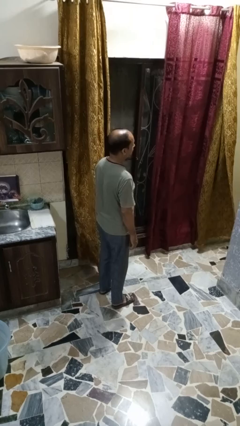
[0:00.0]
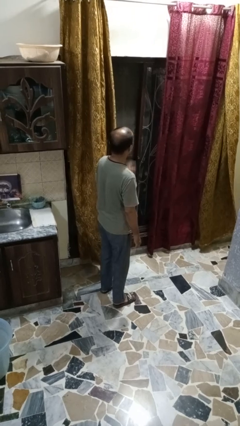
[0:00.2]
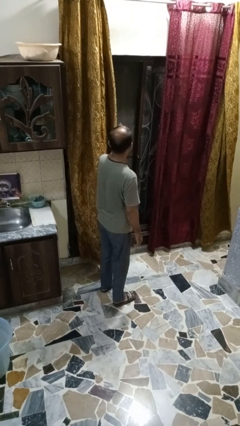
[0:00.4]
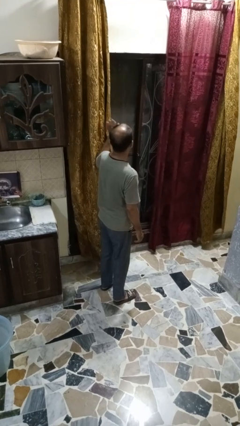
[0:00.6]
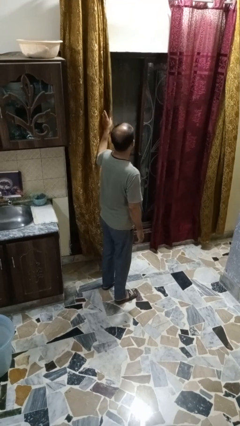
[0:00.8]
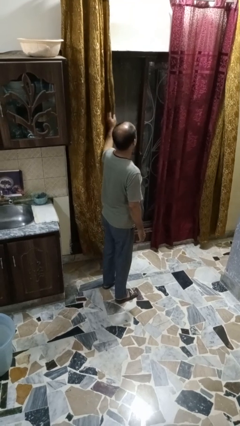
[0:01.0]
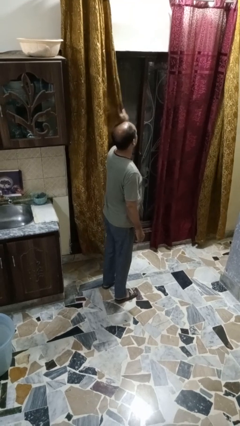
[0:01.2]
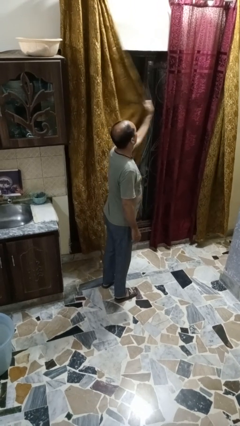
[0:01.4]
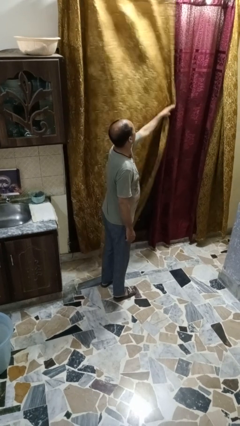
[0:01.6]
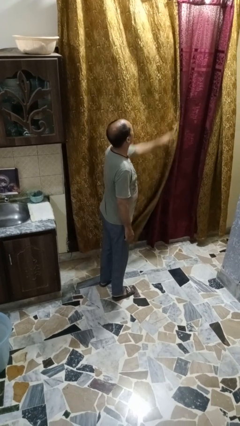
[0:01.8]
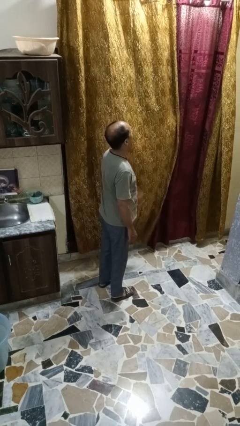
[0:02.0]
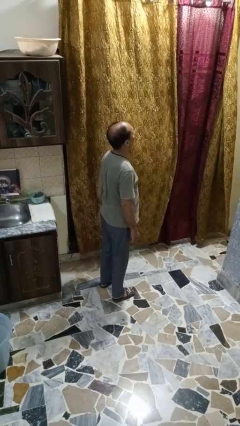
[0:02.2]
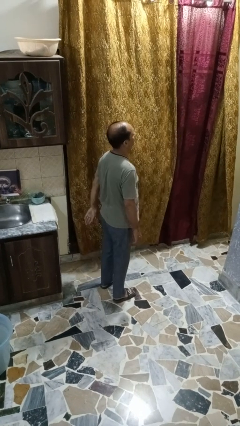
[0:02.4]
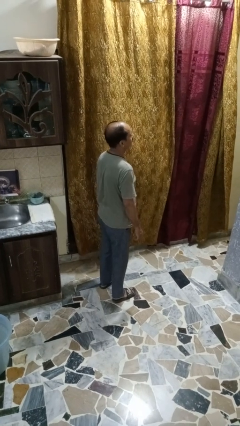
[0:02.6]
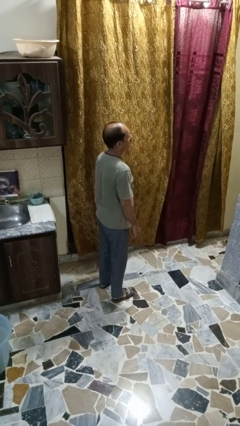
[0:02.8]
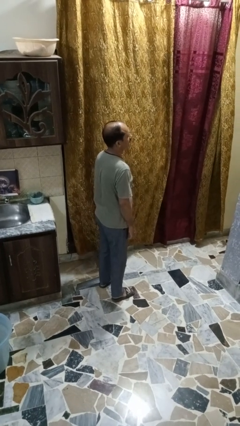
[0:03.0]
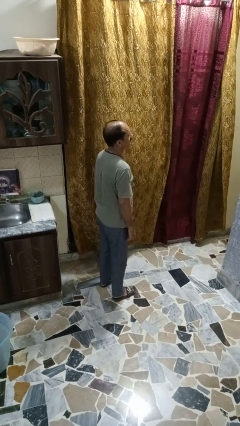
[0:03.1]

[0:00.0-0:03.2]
person closes curtains

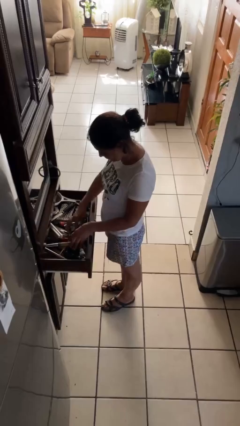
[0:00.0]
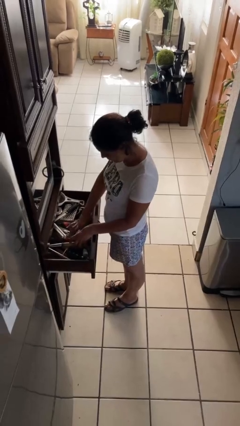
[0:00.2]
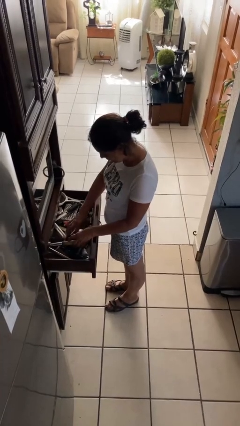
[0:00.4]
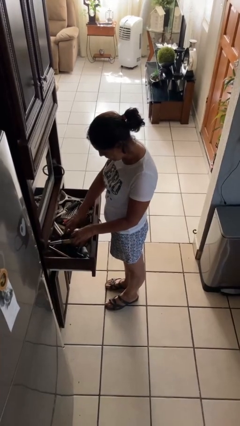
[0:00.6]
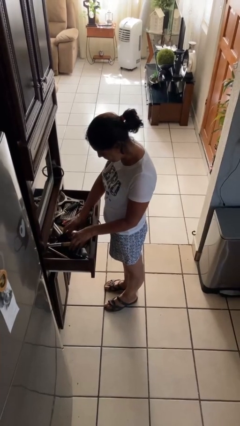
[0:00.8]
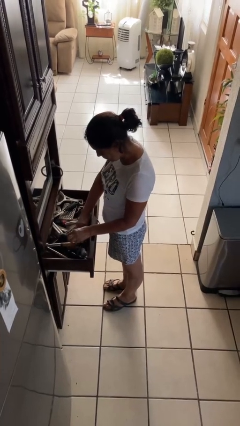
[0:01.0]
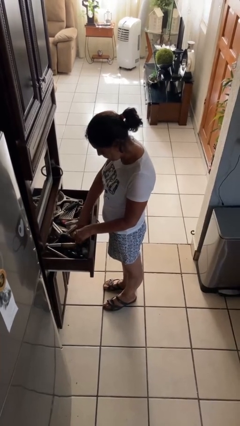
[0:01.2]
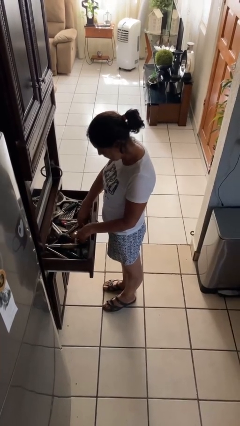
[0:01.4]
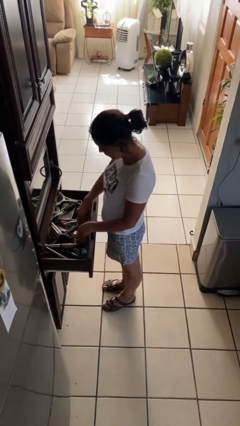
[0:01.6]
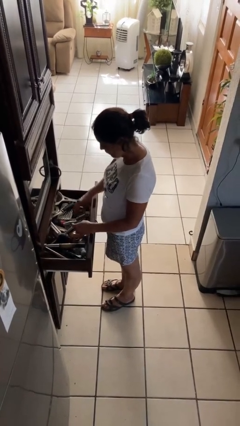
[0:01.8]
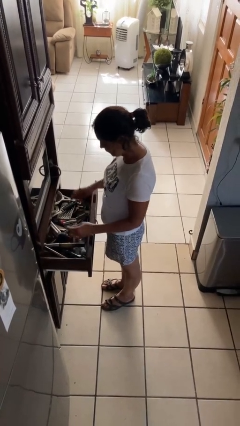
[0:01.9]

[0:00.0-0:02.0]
person searches in kitchen drawer

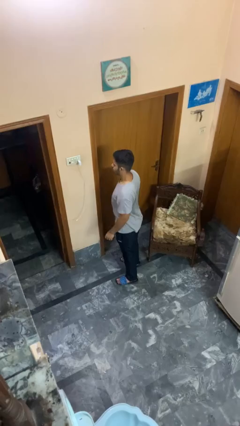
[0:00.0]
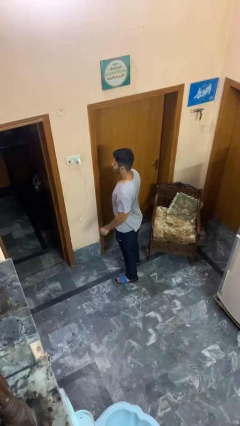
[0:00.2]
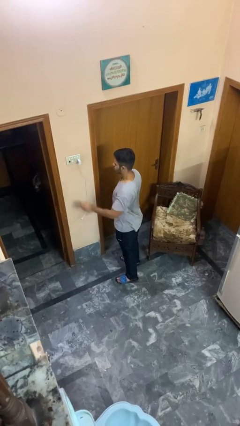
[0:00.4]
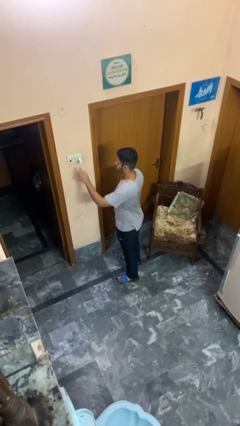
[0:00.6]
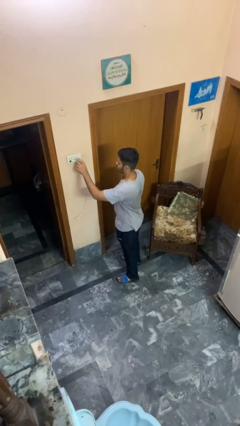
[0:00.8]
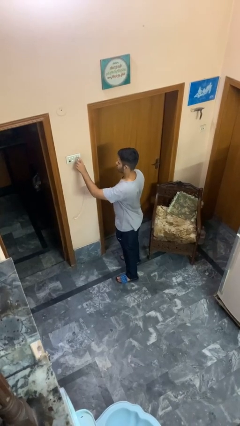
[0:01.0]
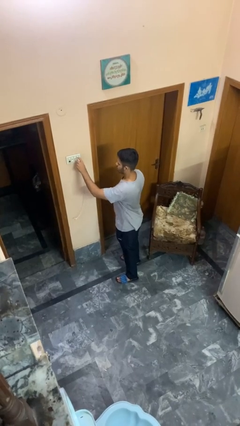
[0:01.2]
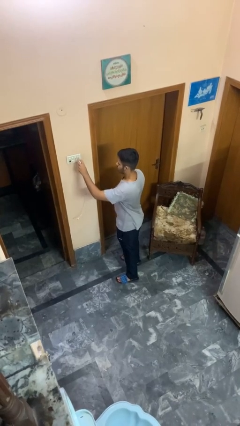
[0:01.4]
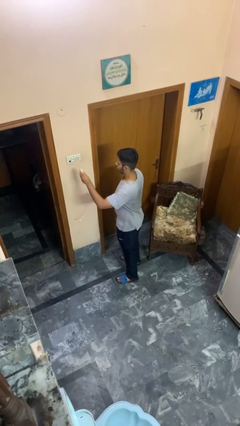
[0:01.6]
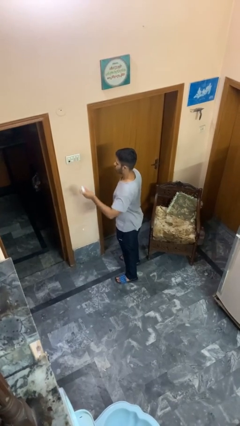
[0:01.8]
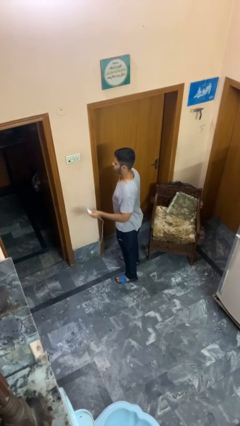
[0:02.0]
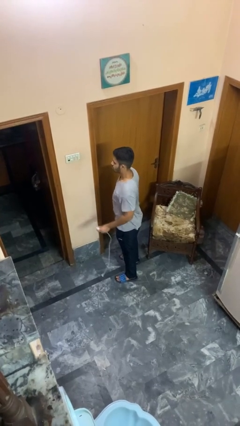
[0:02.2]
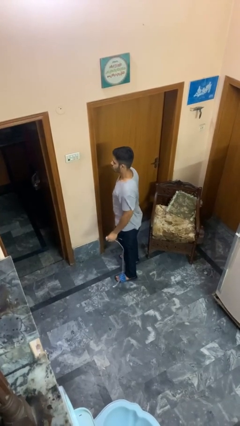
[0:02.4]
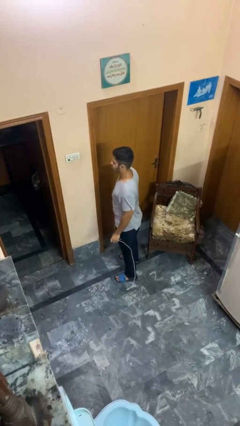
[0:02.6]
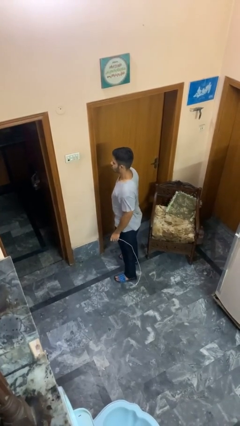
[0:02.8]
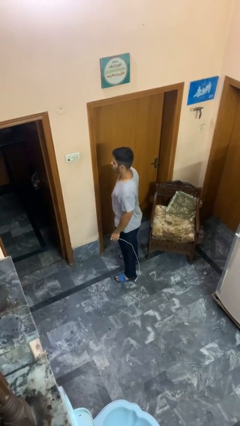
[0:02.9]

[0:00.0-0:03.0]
person unplugs from electrical socket

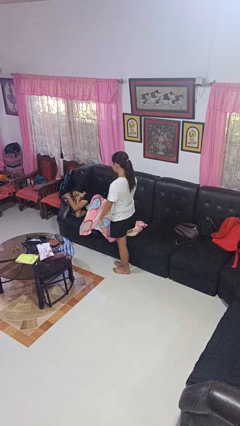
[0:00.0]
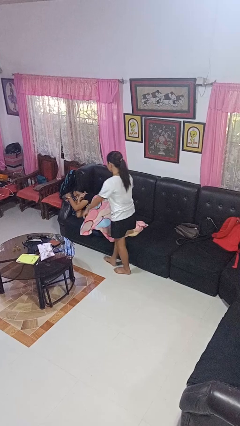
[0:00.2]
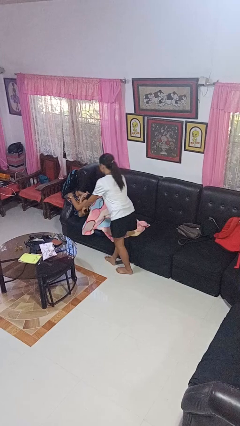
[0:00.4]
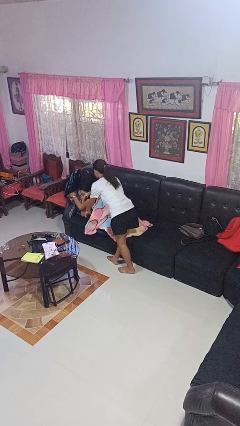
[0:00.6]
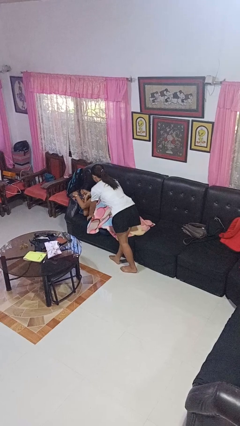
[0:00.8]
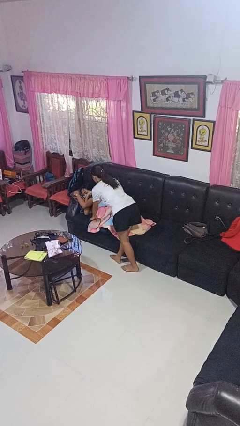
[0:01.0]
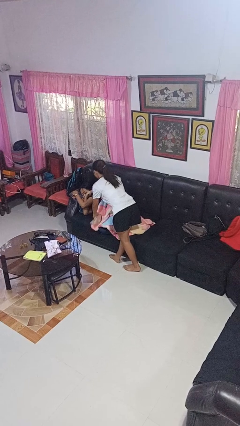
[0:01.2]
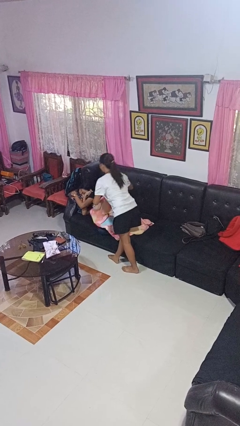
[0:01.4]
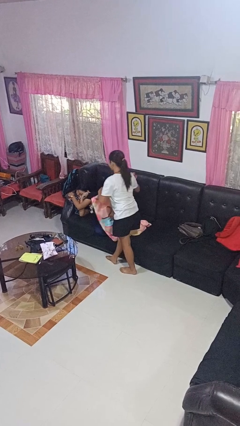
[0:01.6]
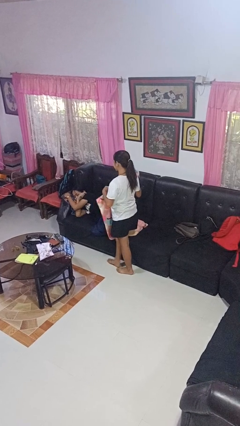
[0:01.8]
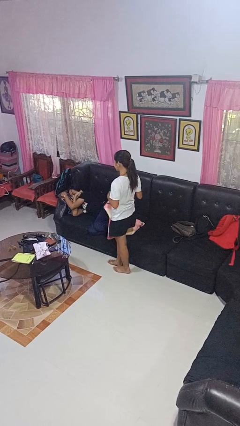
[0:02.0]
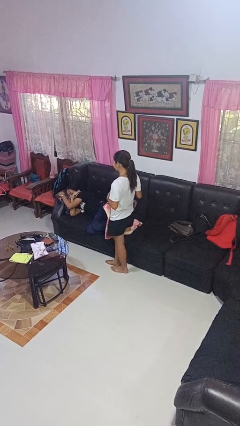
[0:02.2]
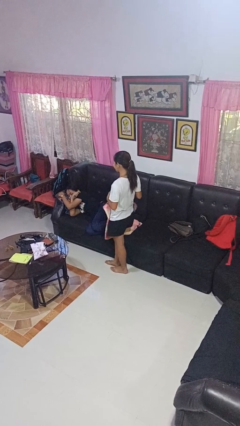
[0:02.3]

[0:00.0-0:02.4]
person uncovers friend with blanket

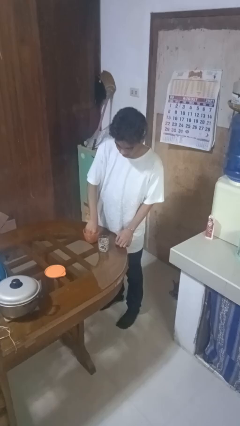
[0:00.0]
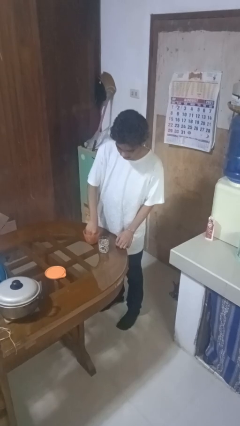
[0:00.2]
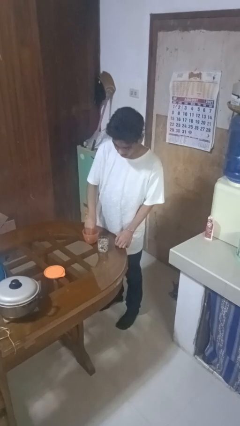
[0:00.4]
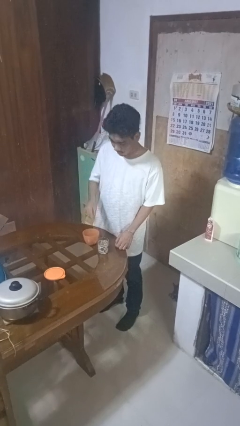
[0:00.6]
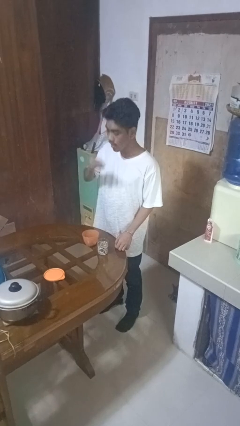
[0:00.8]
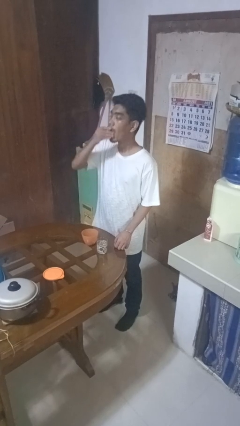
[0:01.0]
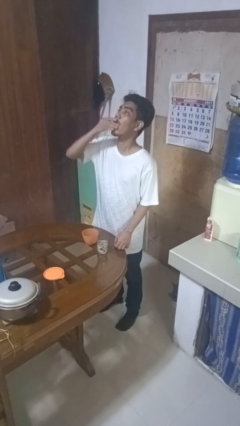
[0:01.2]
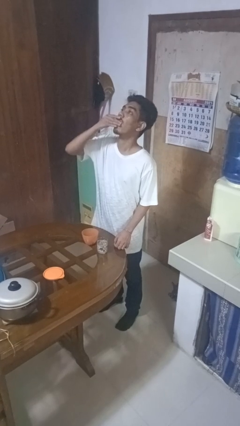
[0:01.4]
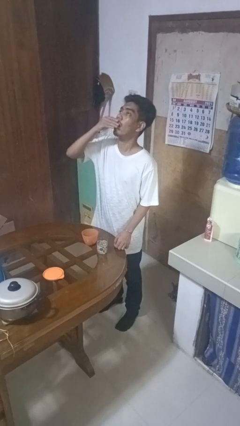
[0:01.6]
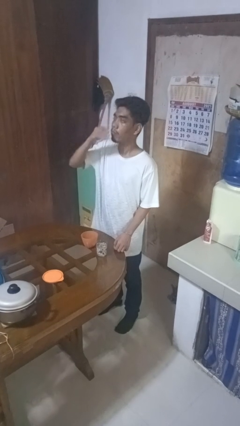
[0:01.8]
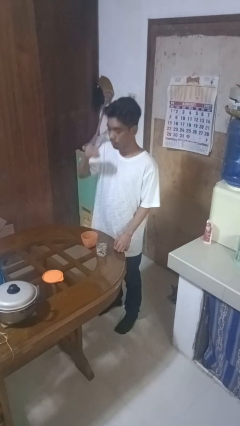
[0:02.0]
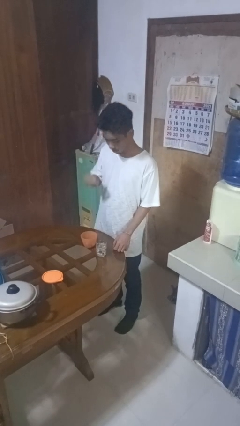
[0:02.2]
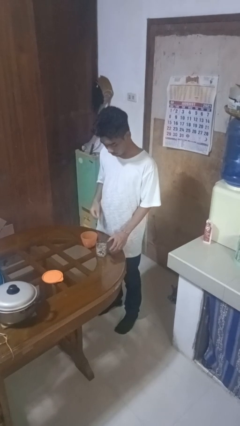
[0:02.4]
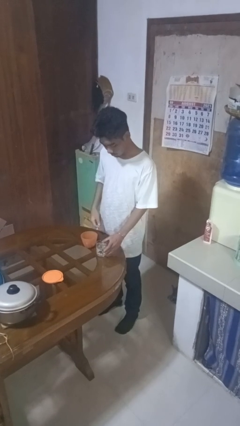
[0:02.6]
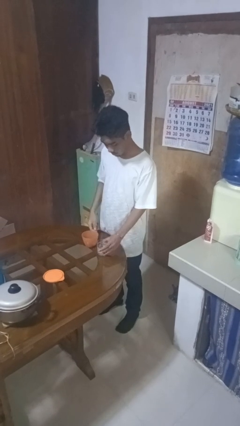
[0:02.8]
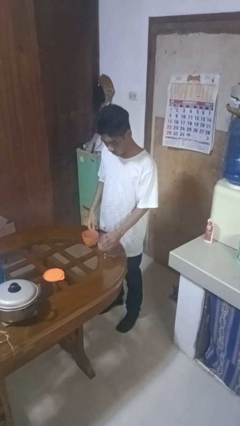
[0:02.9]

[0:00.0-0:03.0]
person takes medicine pills

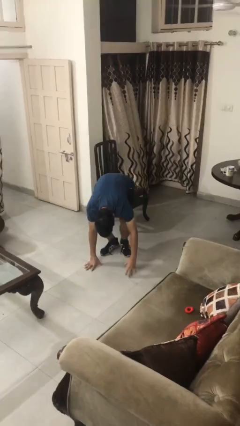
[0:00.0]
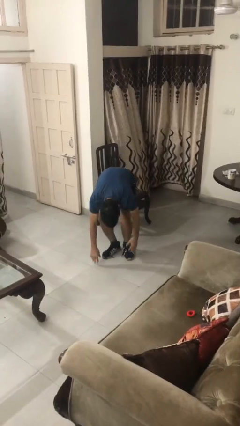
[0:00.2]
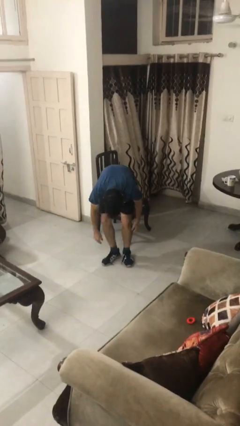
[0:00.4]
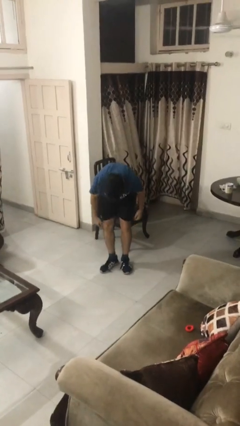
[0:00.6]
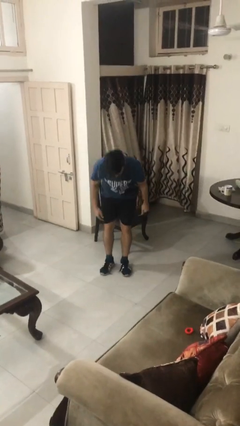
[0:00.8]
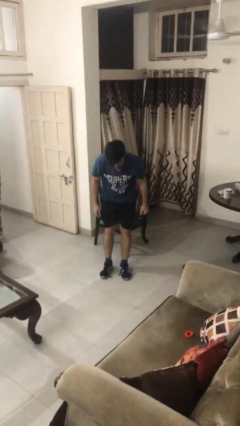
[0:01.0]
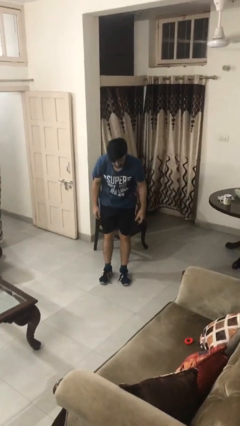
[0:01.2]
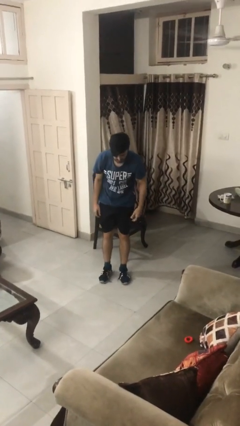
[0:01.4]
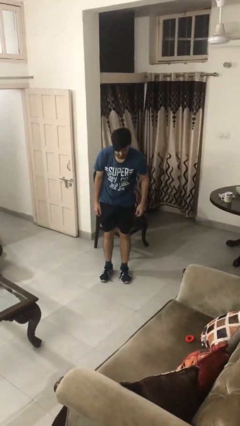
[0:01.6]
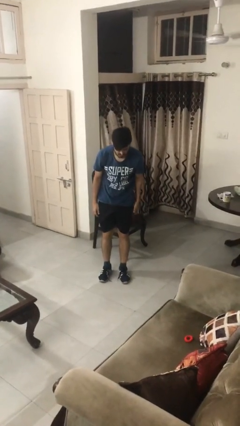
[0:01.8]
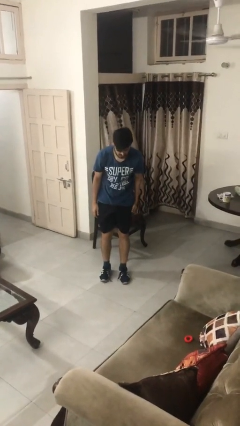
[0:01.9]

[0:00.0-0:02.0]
person stands up from floor

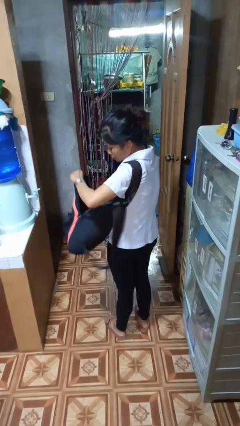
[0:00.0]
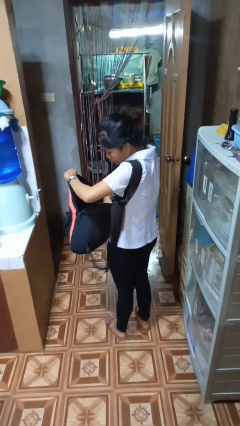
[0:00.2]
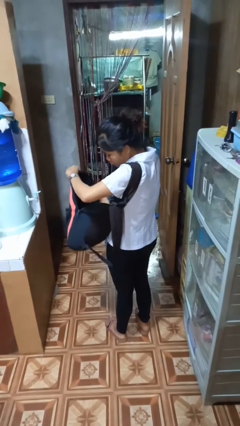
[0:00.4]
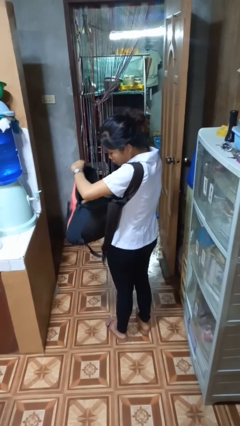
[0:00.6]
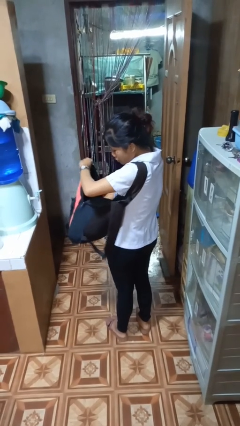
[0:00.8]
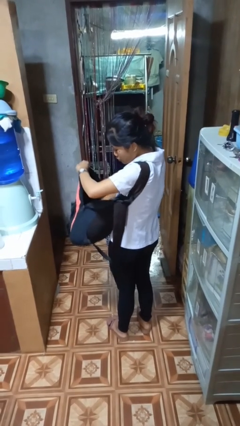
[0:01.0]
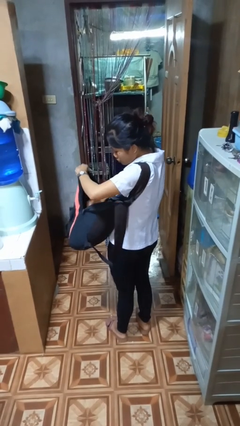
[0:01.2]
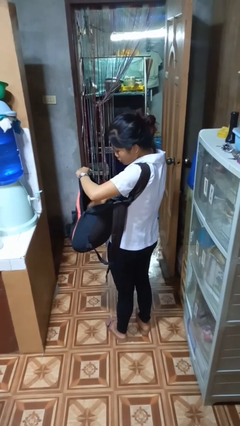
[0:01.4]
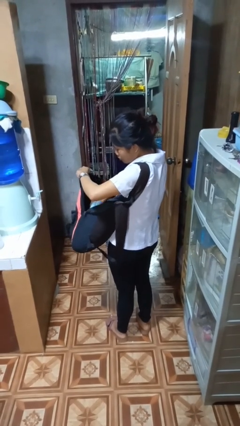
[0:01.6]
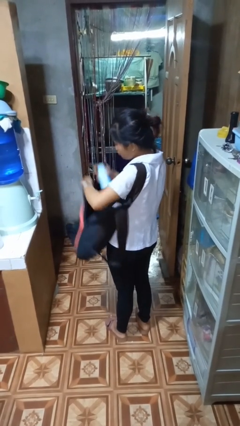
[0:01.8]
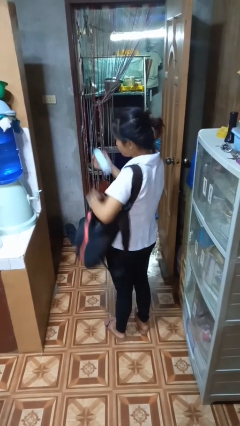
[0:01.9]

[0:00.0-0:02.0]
person searches in backpack
